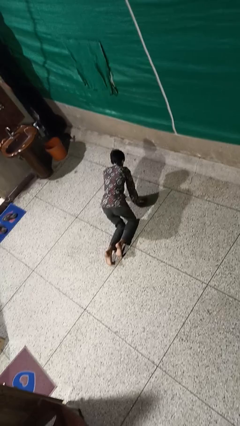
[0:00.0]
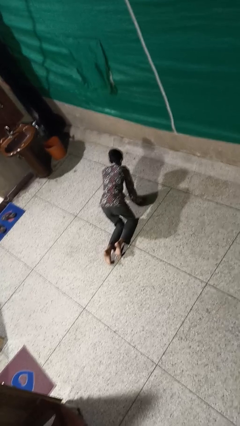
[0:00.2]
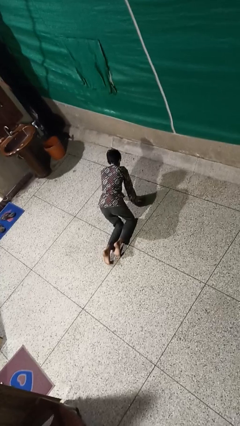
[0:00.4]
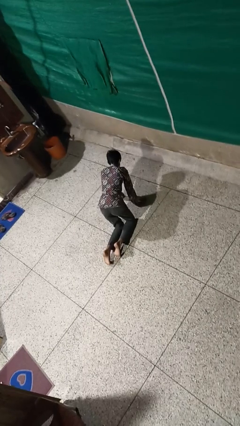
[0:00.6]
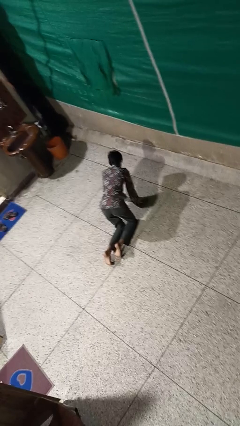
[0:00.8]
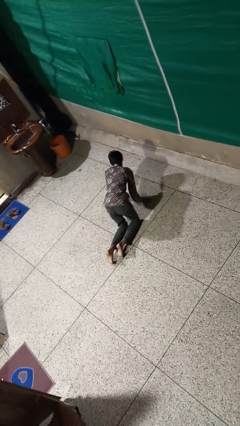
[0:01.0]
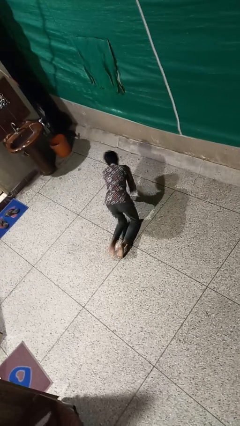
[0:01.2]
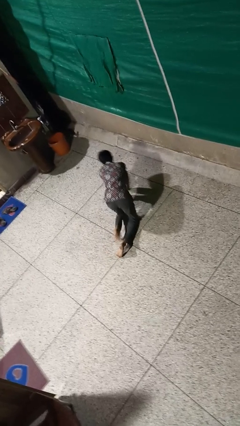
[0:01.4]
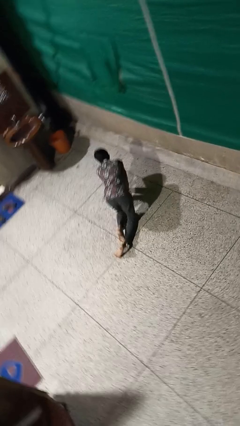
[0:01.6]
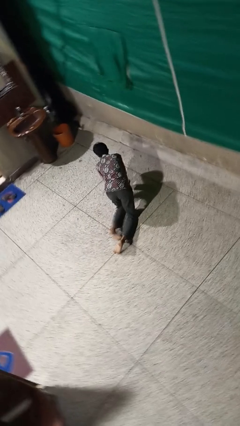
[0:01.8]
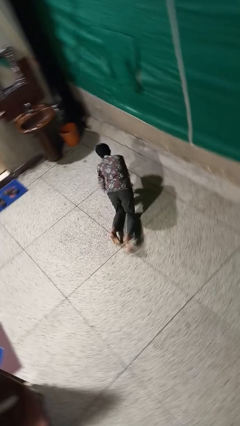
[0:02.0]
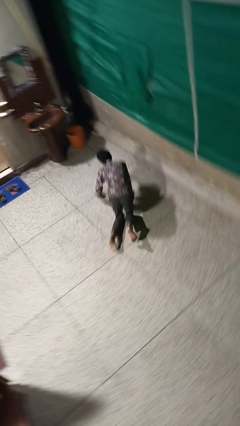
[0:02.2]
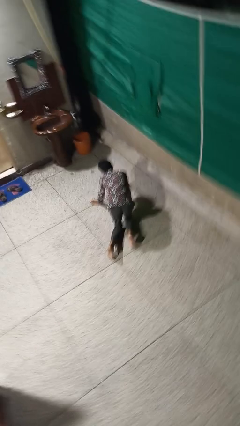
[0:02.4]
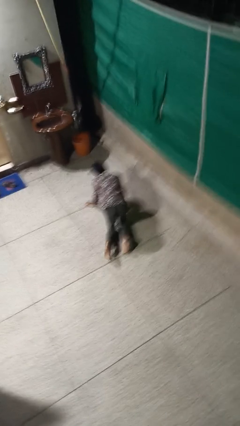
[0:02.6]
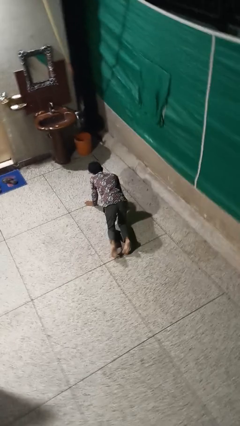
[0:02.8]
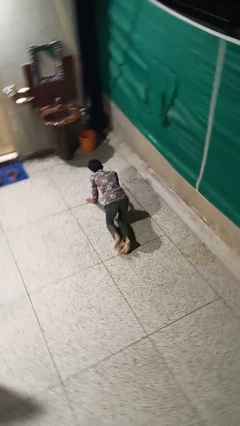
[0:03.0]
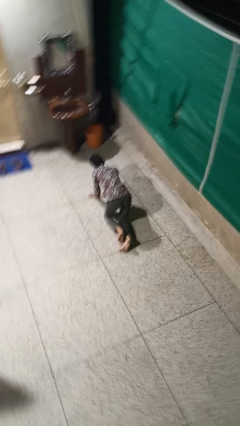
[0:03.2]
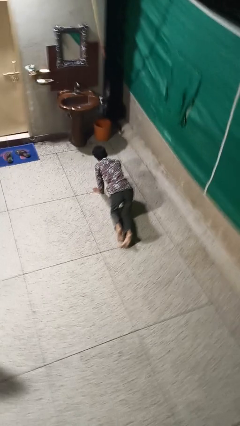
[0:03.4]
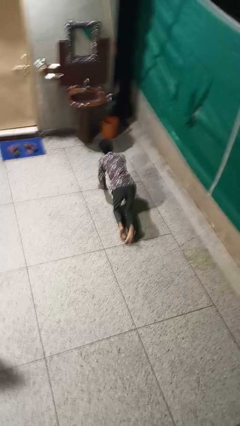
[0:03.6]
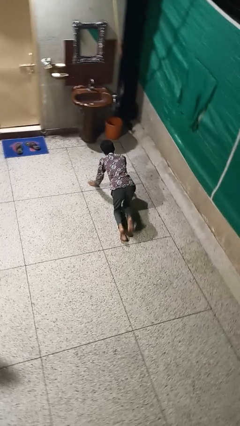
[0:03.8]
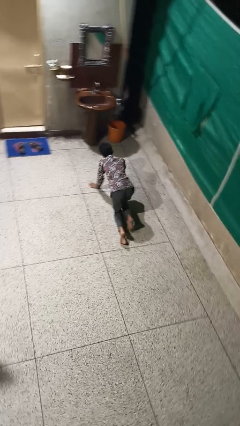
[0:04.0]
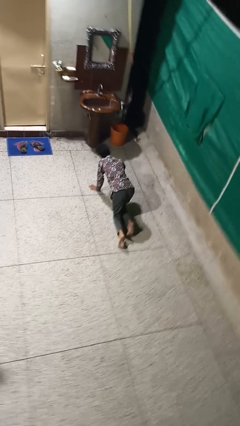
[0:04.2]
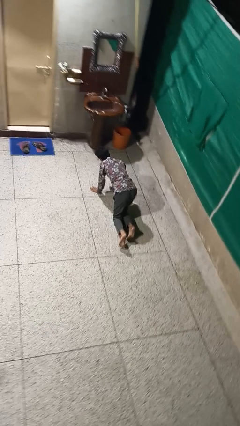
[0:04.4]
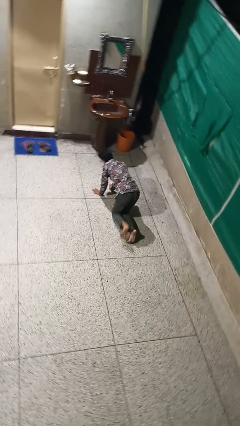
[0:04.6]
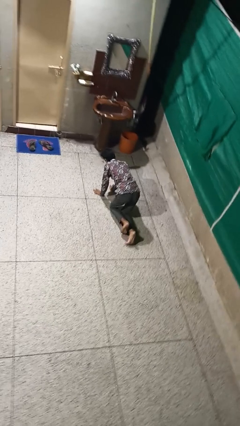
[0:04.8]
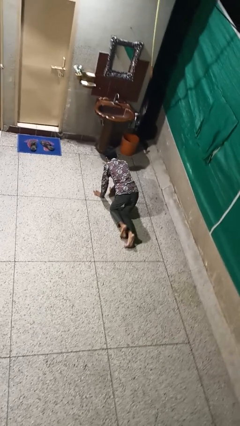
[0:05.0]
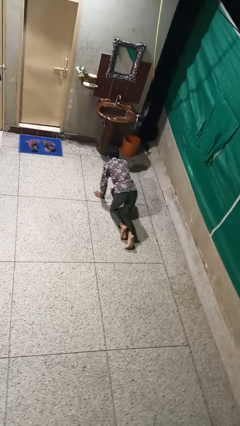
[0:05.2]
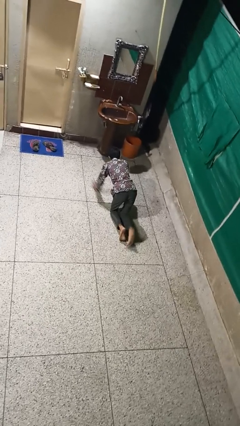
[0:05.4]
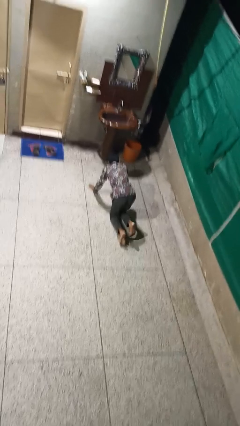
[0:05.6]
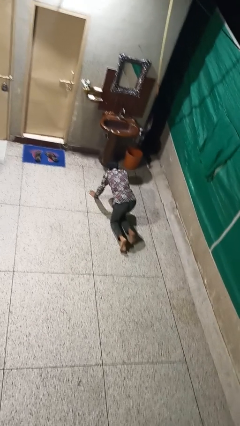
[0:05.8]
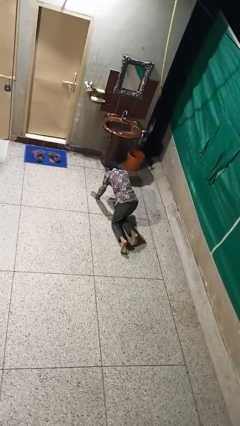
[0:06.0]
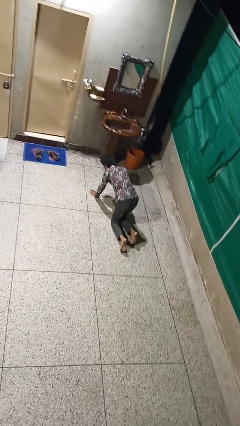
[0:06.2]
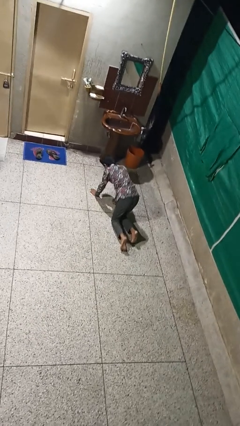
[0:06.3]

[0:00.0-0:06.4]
person crawls

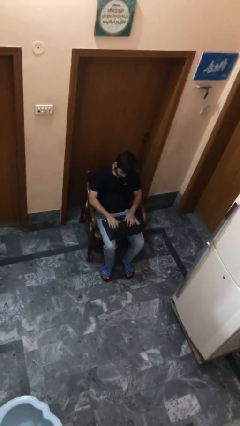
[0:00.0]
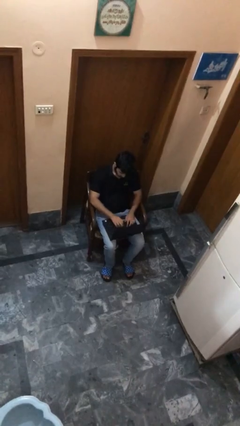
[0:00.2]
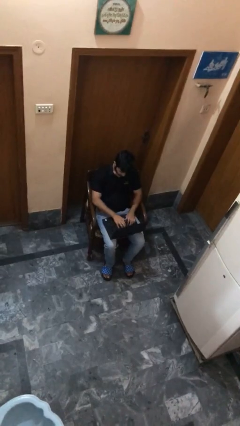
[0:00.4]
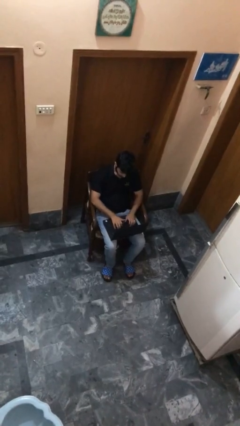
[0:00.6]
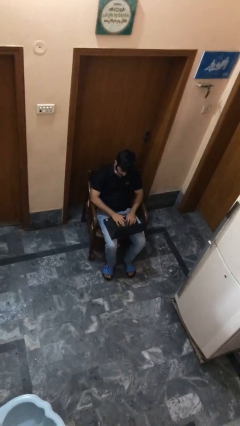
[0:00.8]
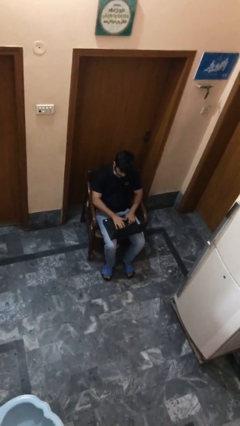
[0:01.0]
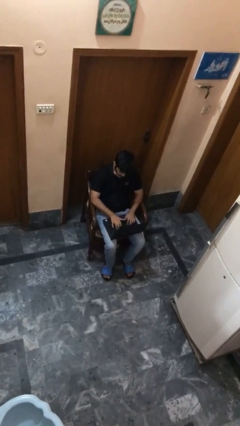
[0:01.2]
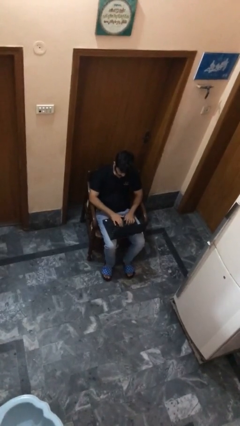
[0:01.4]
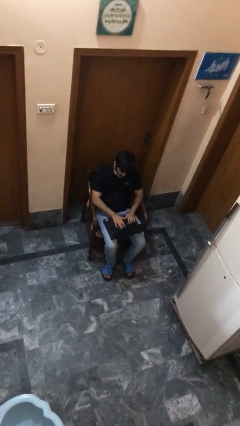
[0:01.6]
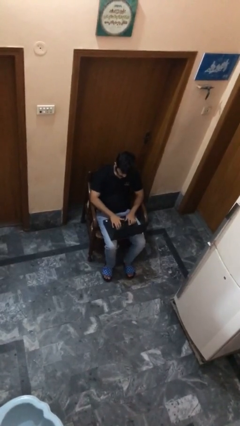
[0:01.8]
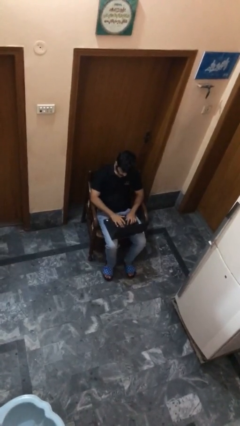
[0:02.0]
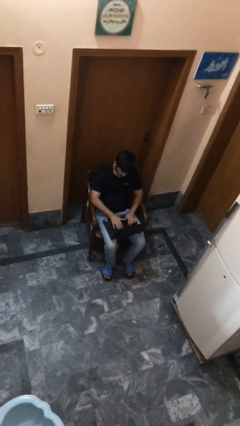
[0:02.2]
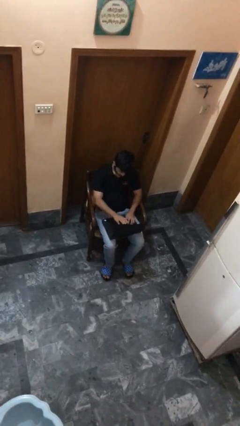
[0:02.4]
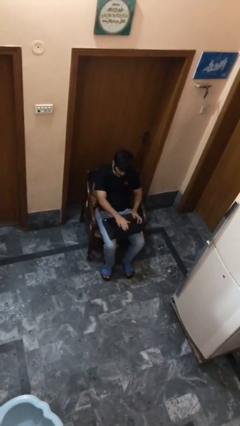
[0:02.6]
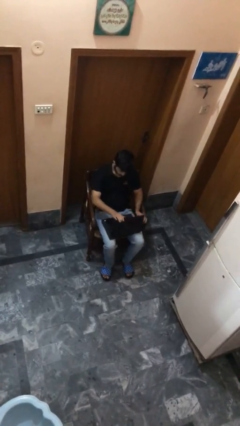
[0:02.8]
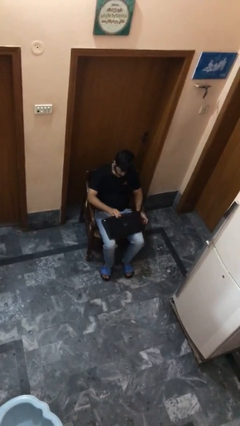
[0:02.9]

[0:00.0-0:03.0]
person interacts with laptop

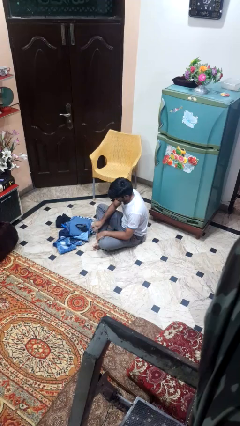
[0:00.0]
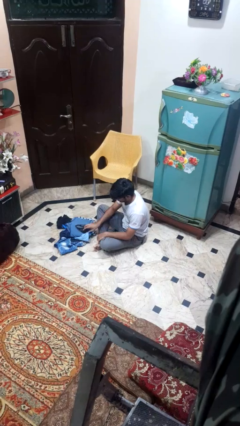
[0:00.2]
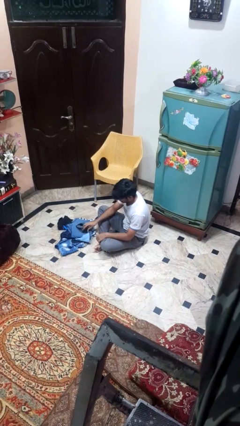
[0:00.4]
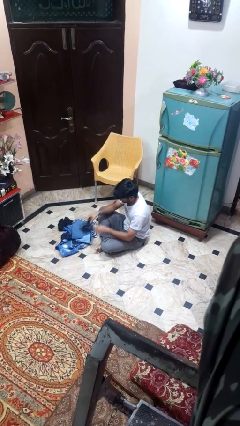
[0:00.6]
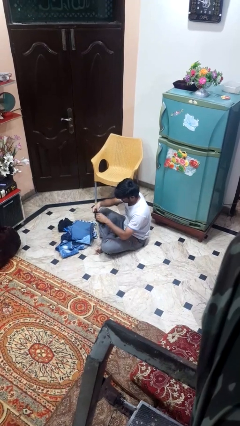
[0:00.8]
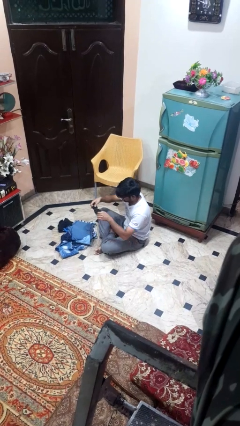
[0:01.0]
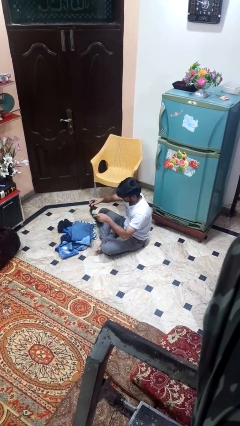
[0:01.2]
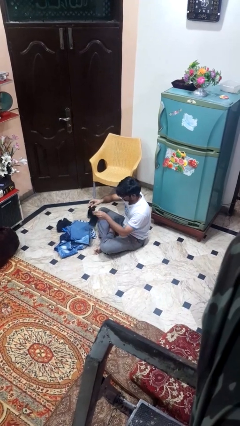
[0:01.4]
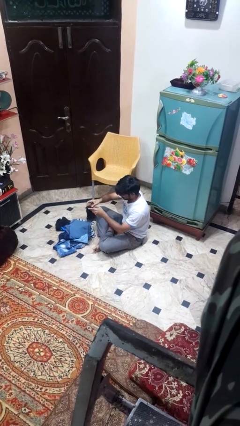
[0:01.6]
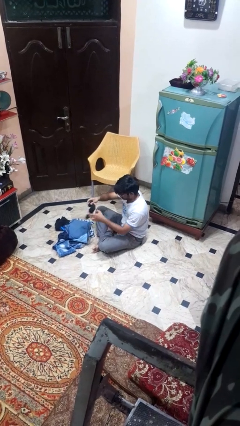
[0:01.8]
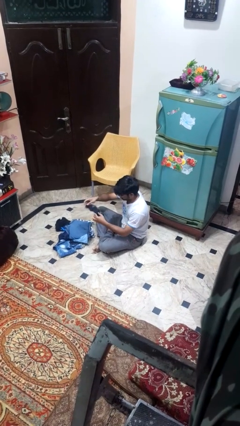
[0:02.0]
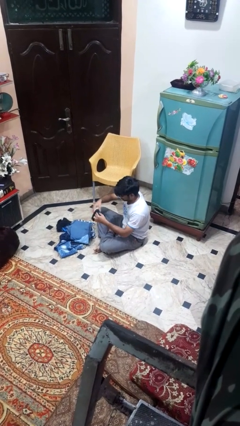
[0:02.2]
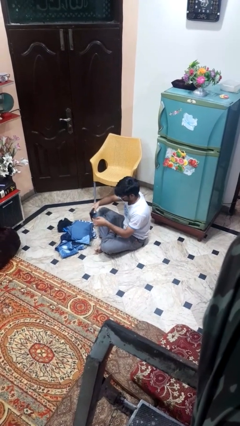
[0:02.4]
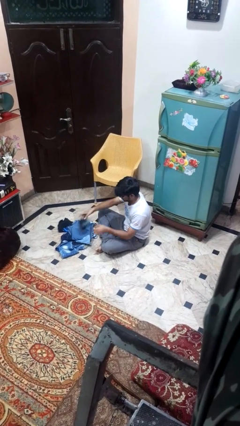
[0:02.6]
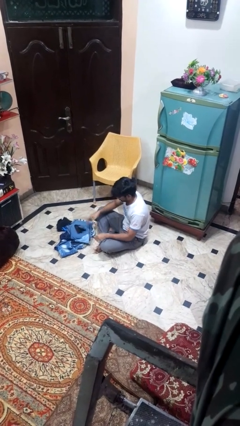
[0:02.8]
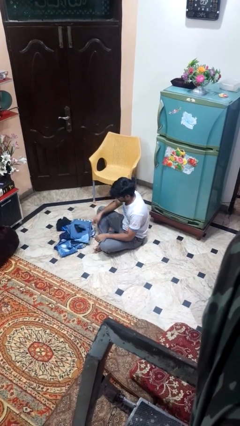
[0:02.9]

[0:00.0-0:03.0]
person folds socks

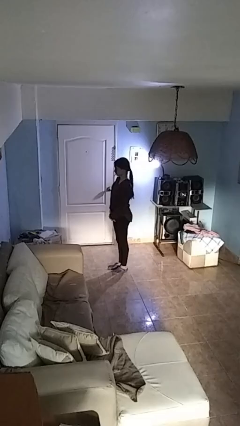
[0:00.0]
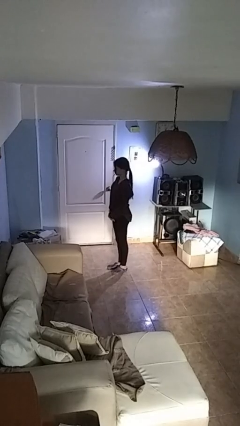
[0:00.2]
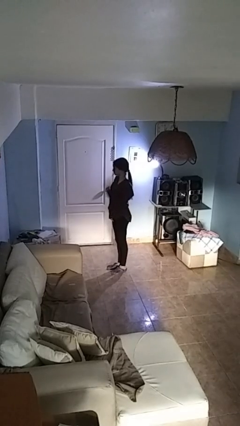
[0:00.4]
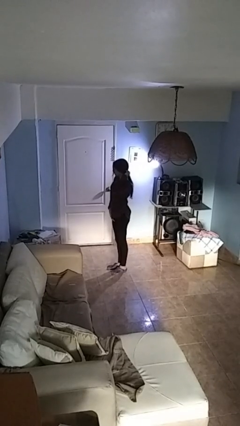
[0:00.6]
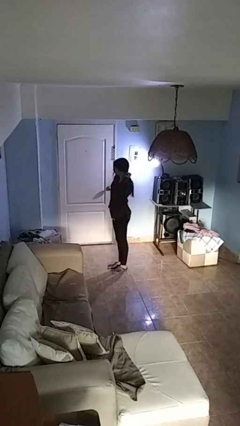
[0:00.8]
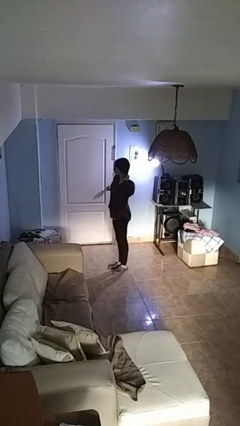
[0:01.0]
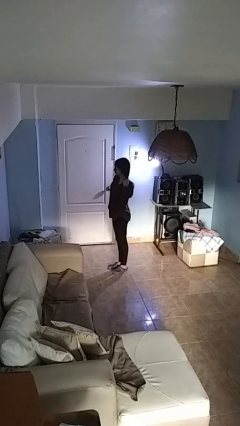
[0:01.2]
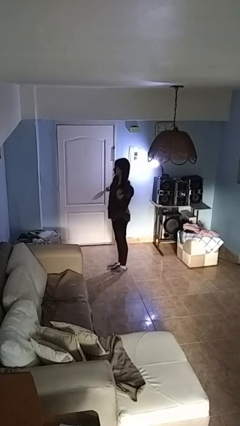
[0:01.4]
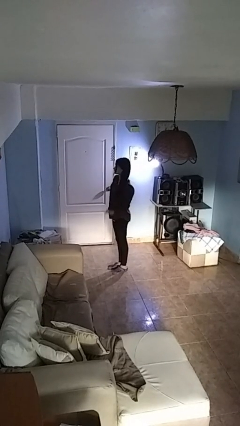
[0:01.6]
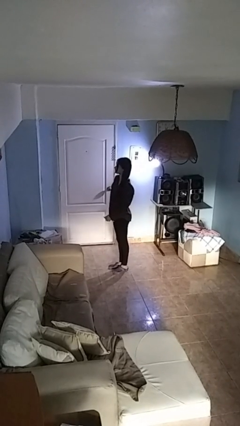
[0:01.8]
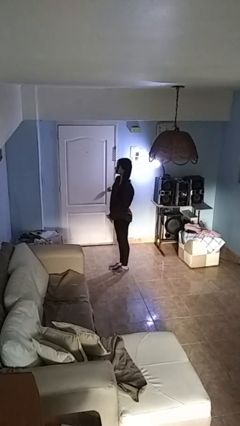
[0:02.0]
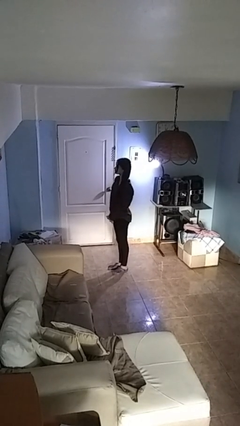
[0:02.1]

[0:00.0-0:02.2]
person takes off hairtie

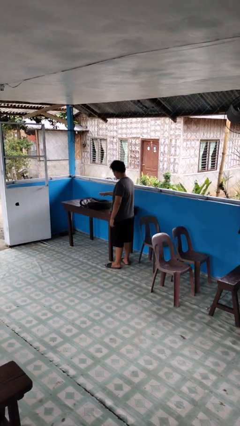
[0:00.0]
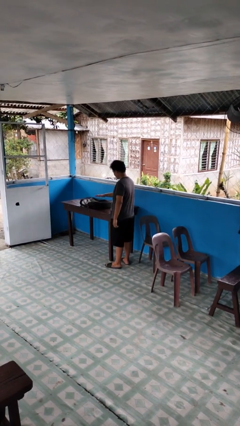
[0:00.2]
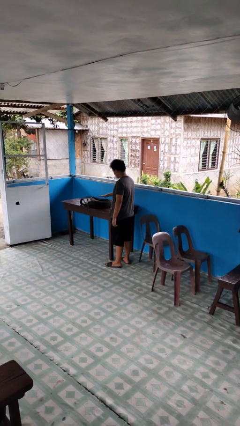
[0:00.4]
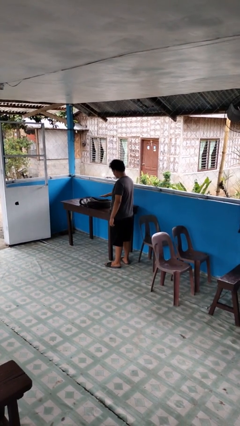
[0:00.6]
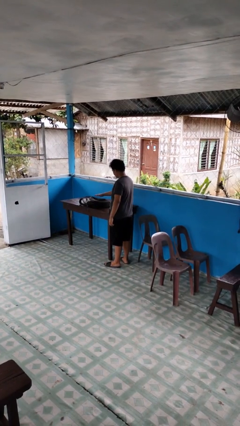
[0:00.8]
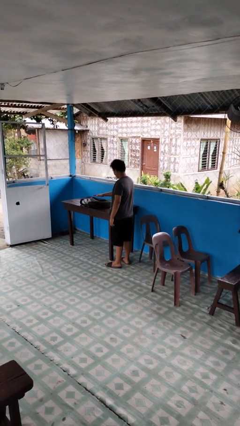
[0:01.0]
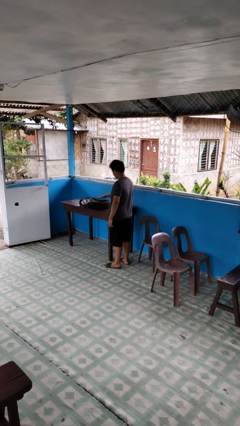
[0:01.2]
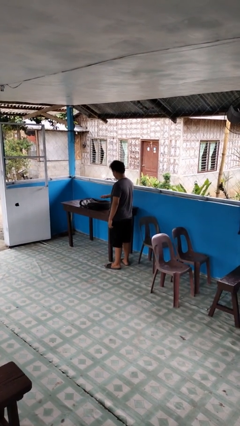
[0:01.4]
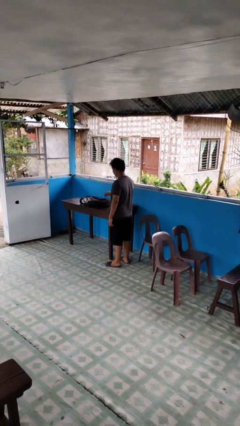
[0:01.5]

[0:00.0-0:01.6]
person waves hand over object

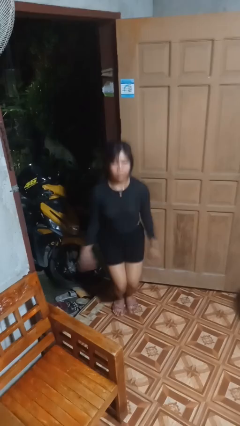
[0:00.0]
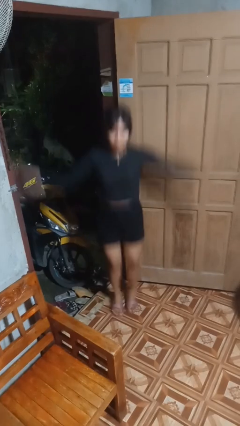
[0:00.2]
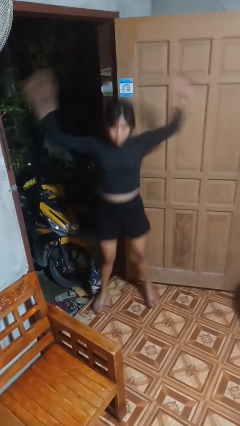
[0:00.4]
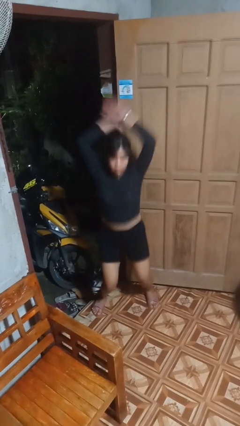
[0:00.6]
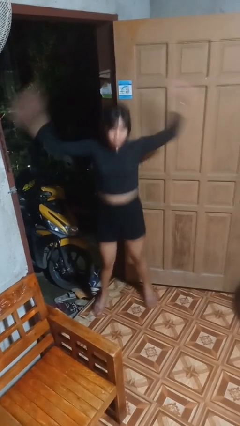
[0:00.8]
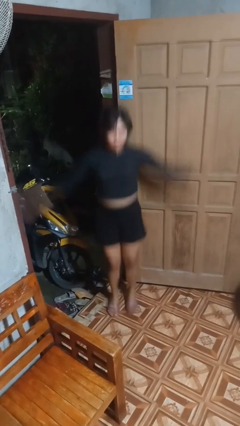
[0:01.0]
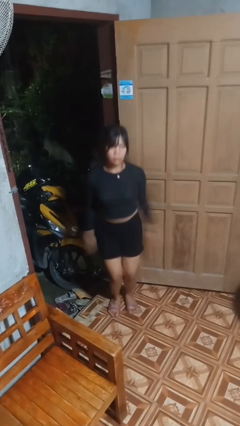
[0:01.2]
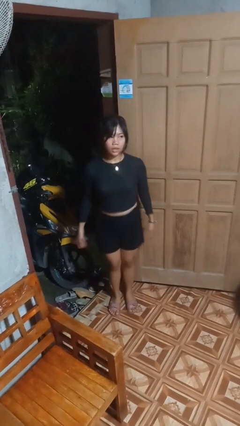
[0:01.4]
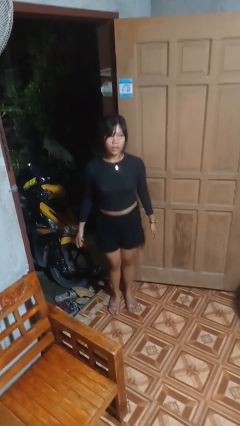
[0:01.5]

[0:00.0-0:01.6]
person exercises with jumping jacks
